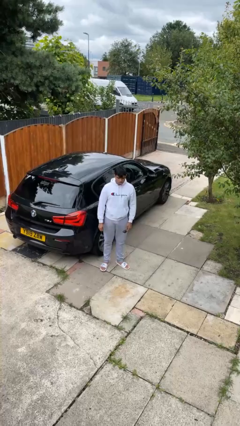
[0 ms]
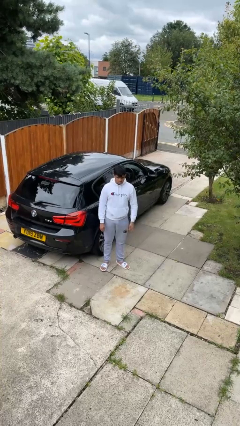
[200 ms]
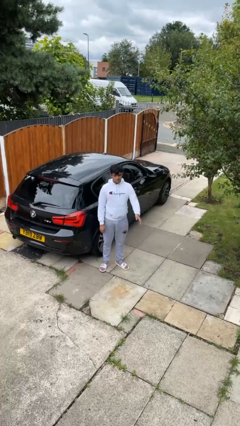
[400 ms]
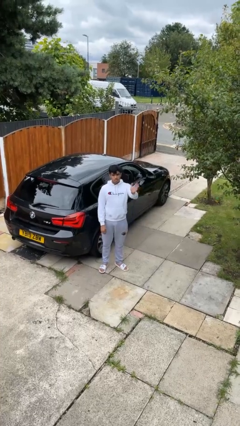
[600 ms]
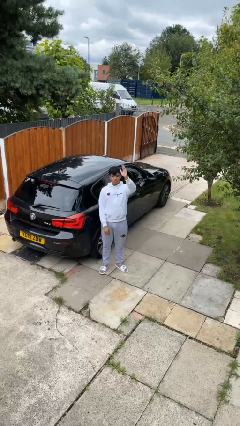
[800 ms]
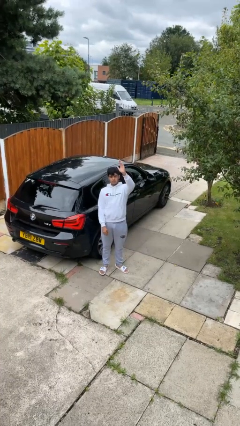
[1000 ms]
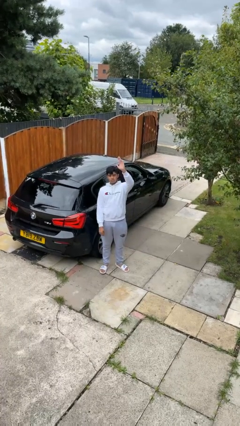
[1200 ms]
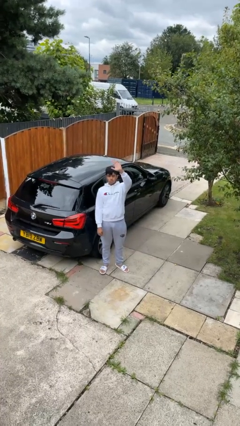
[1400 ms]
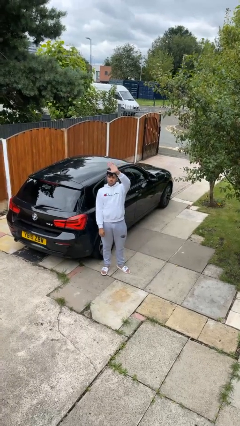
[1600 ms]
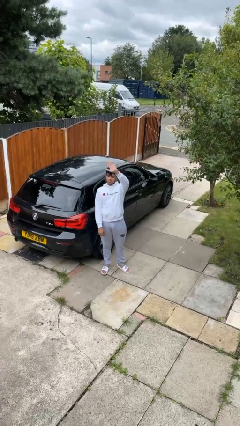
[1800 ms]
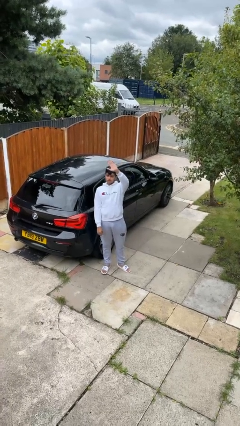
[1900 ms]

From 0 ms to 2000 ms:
person gestures raise hand

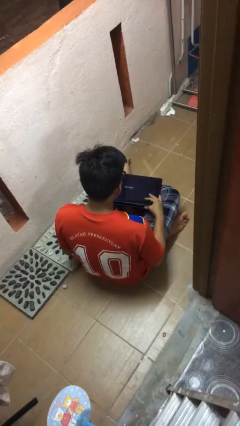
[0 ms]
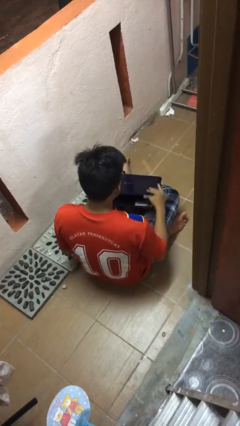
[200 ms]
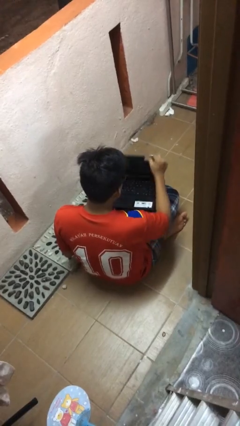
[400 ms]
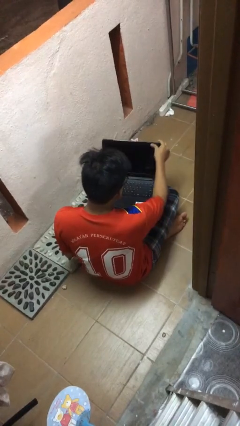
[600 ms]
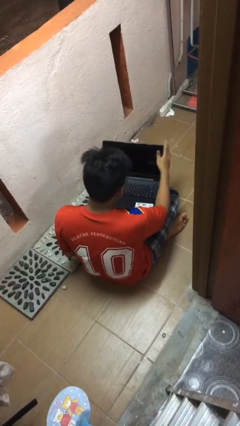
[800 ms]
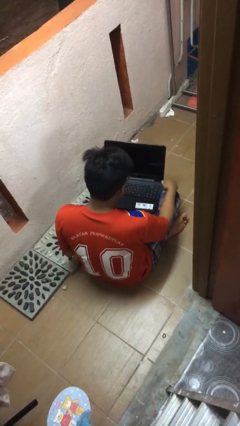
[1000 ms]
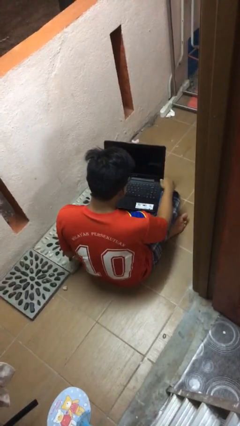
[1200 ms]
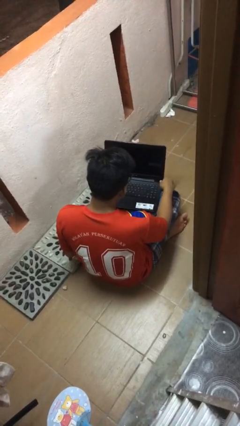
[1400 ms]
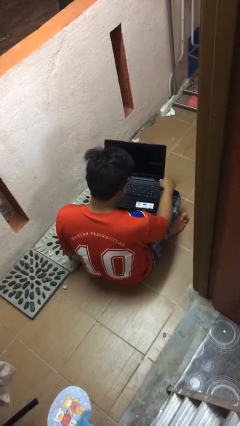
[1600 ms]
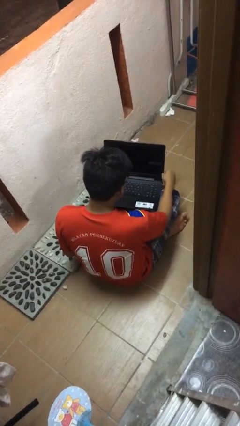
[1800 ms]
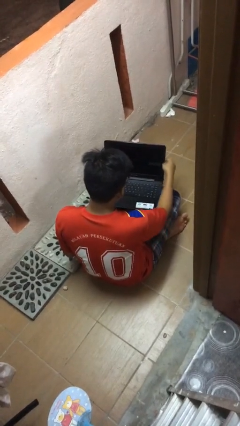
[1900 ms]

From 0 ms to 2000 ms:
person opens laptop

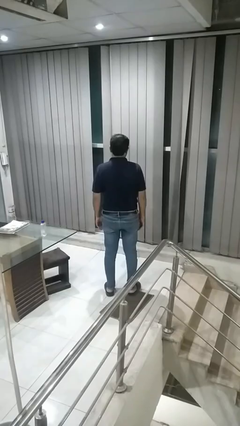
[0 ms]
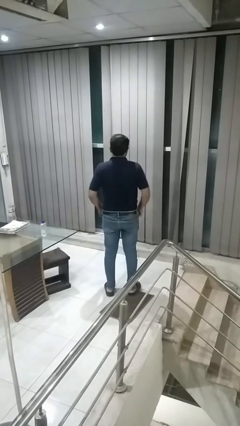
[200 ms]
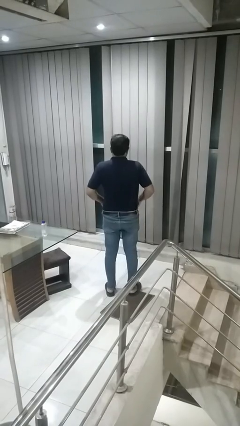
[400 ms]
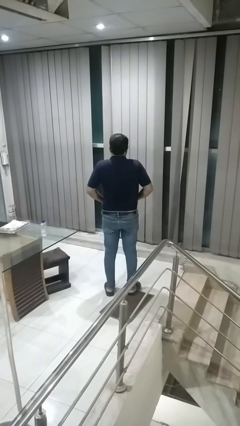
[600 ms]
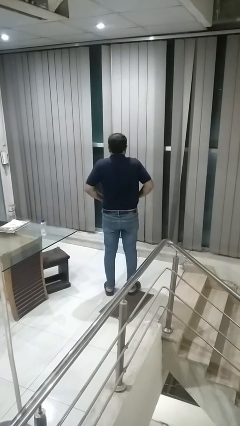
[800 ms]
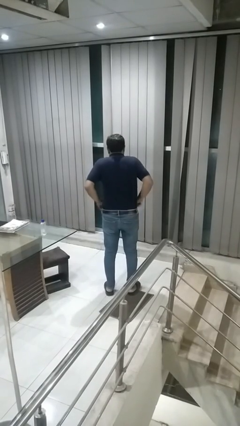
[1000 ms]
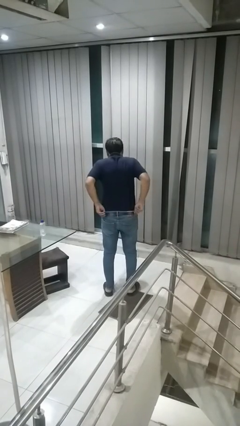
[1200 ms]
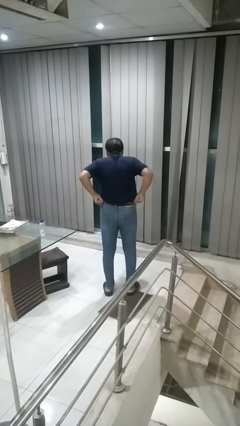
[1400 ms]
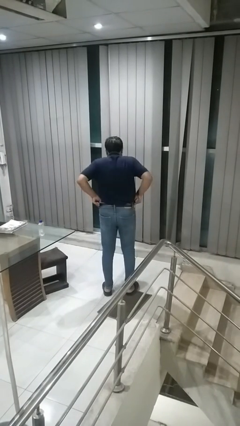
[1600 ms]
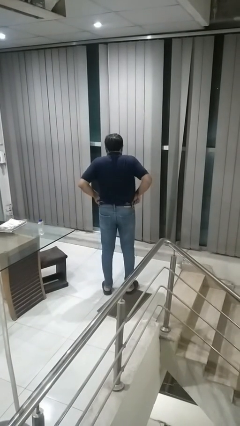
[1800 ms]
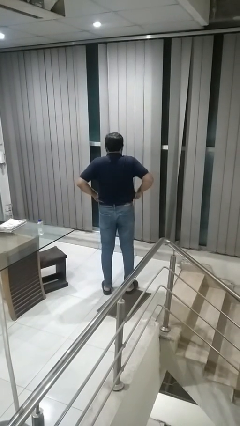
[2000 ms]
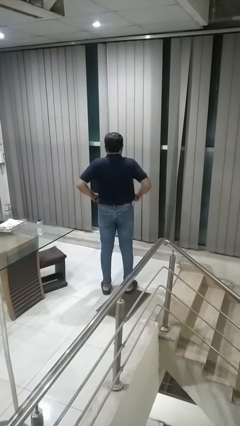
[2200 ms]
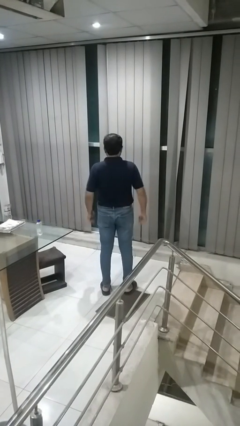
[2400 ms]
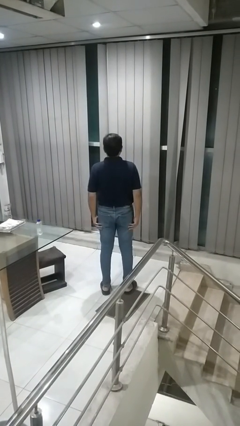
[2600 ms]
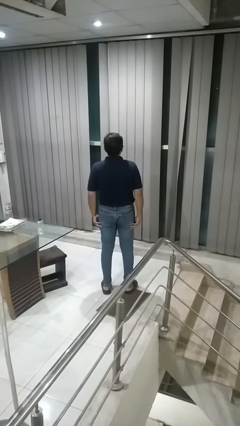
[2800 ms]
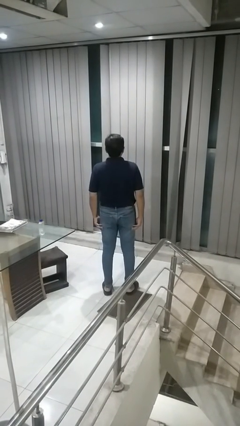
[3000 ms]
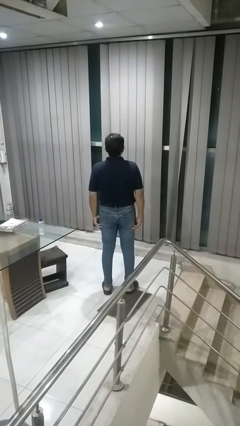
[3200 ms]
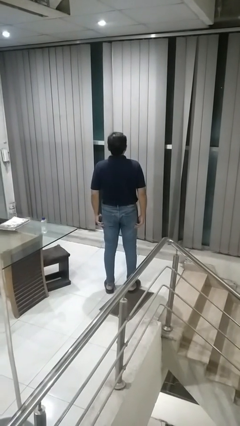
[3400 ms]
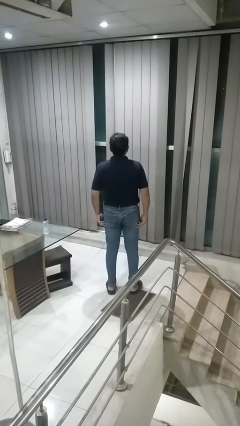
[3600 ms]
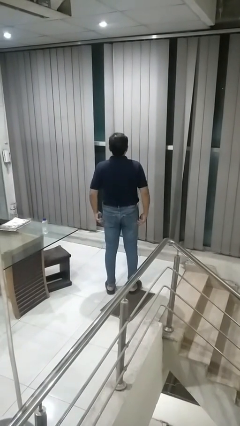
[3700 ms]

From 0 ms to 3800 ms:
person hikes up pants

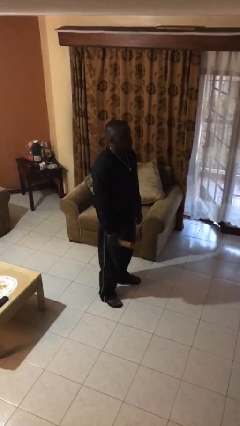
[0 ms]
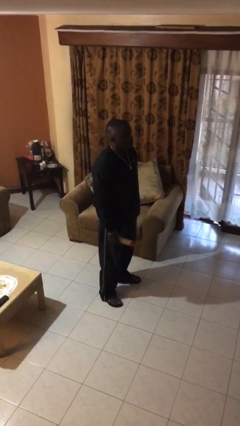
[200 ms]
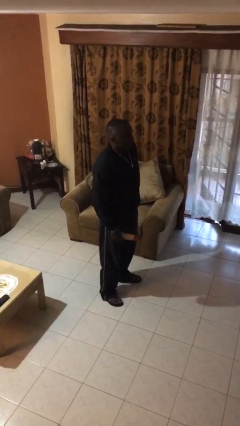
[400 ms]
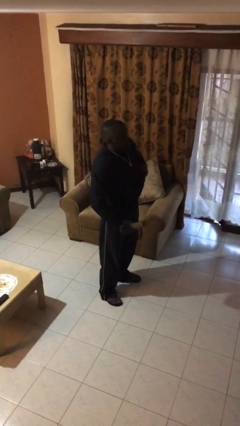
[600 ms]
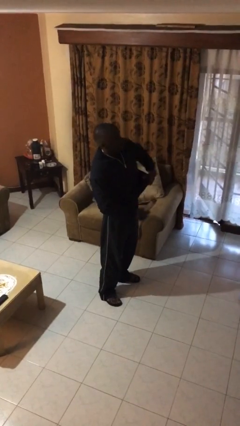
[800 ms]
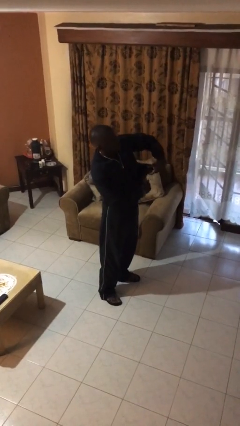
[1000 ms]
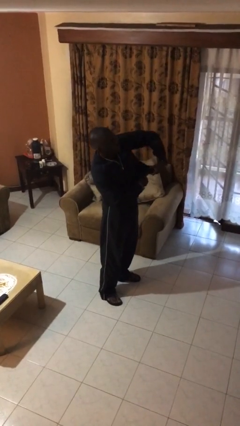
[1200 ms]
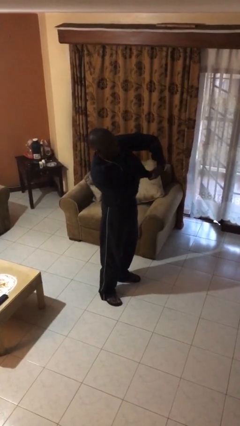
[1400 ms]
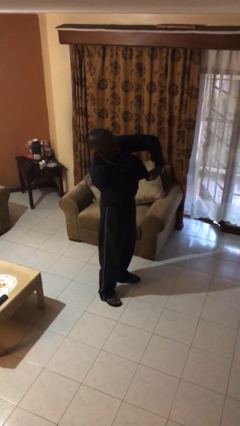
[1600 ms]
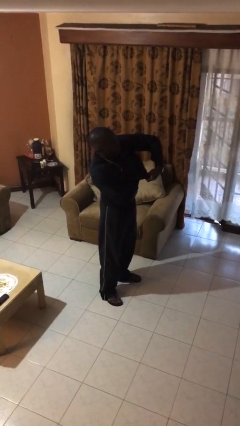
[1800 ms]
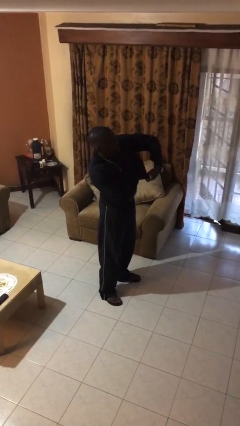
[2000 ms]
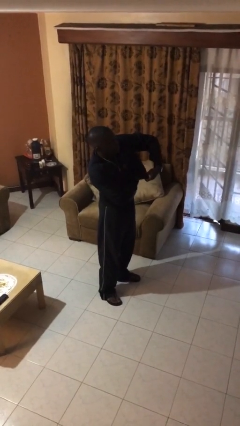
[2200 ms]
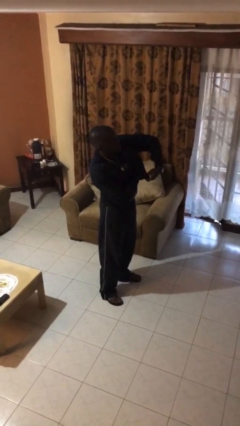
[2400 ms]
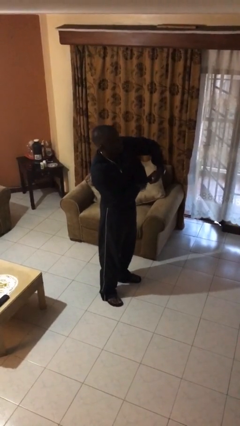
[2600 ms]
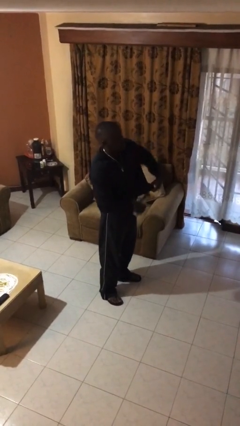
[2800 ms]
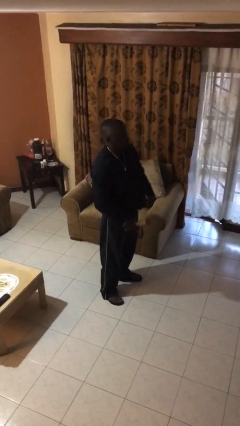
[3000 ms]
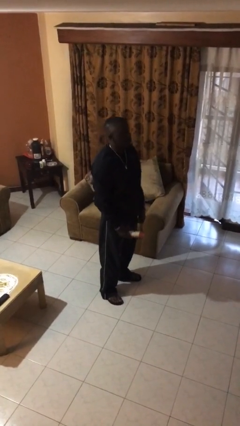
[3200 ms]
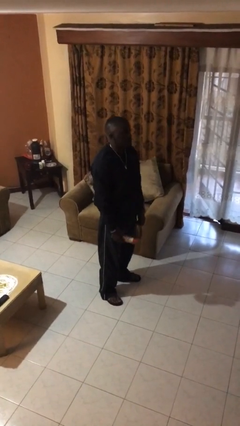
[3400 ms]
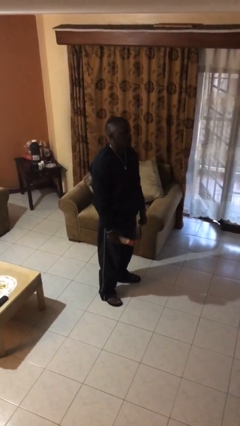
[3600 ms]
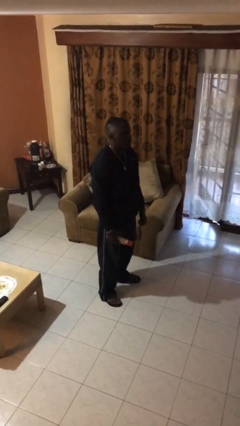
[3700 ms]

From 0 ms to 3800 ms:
person applies deodorant

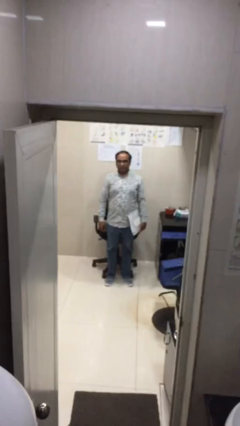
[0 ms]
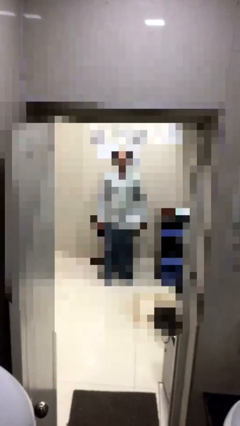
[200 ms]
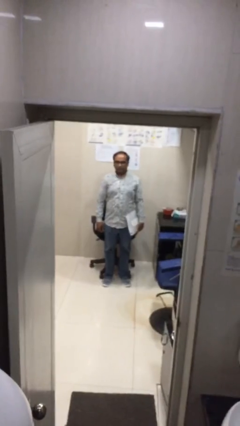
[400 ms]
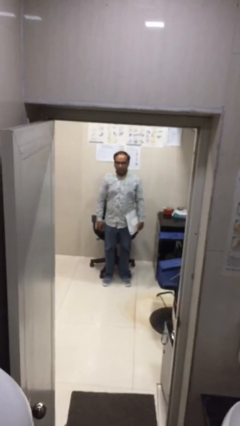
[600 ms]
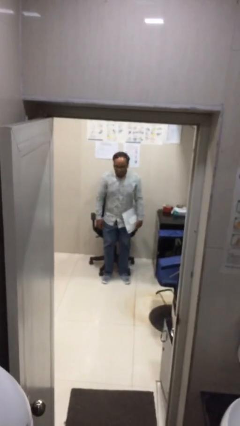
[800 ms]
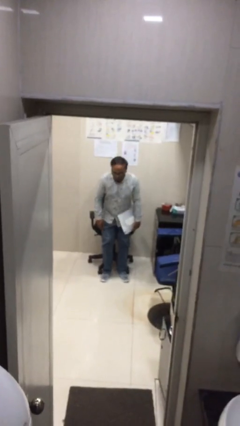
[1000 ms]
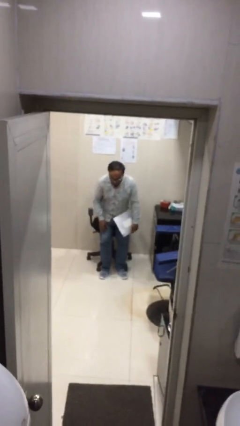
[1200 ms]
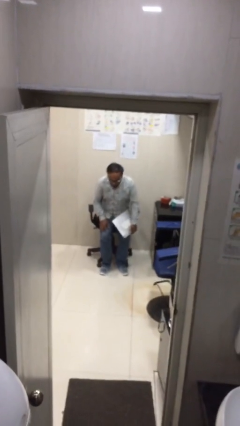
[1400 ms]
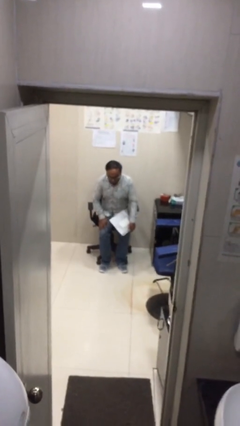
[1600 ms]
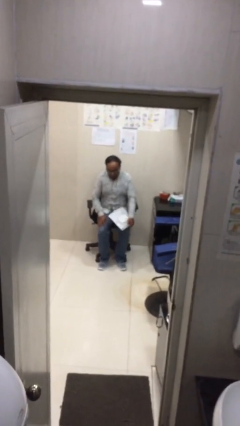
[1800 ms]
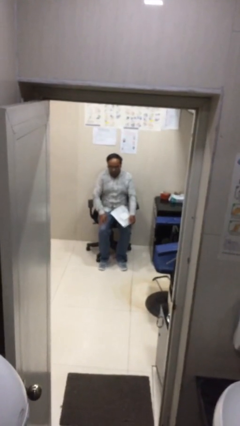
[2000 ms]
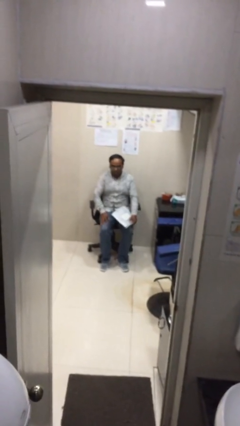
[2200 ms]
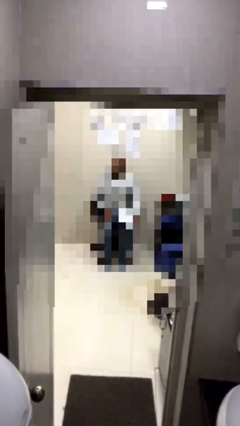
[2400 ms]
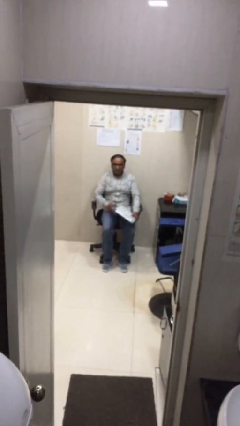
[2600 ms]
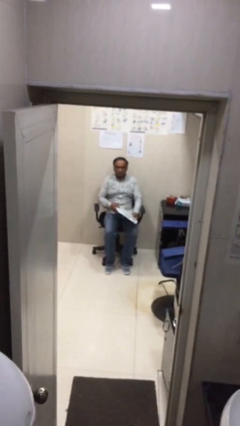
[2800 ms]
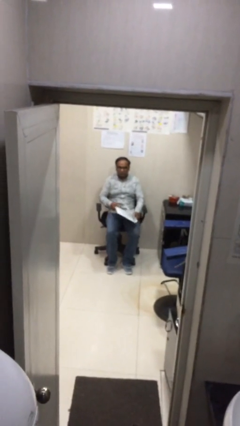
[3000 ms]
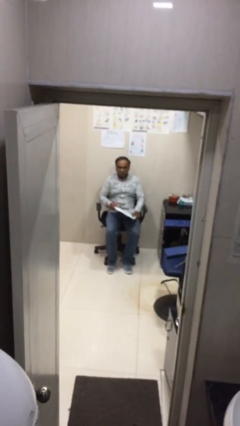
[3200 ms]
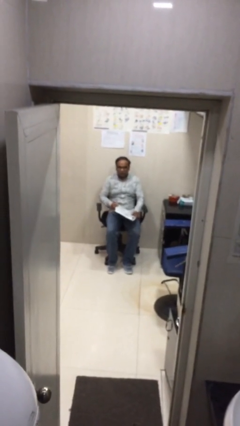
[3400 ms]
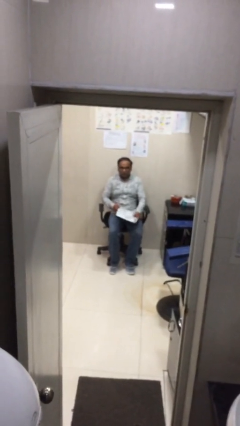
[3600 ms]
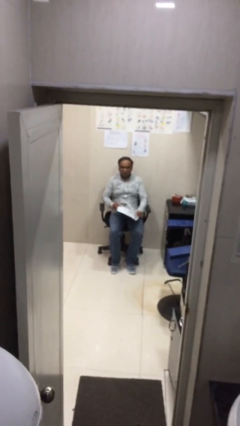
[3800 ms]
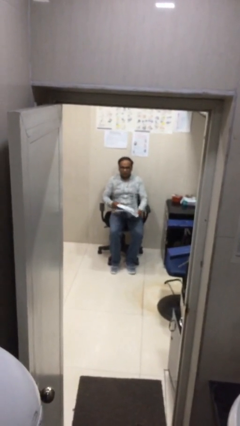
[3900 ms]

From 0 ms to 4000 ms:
person sits down

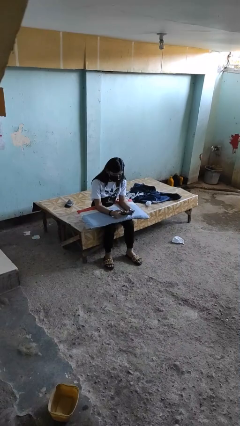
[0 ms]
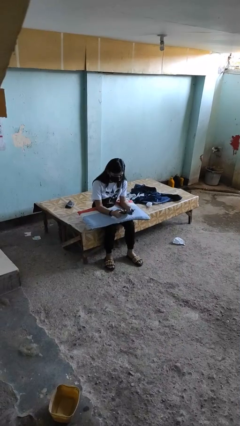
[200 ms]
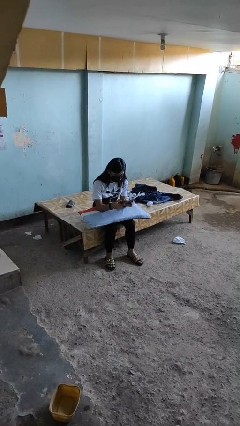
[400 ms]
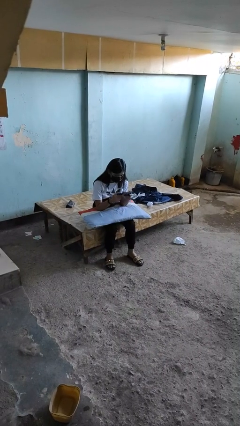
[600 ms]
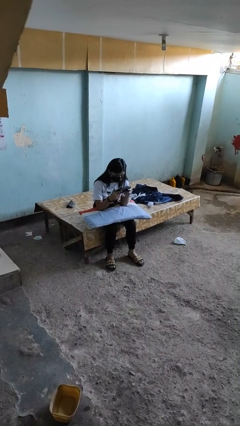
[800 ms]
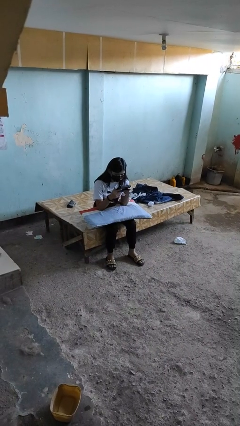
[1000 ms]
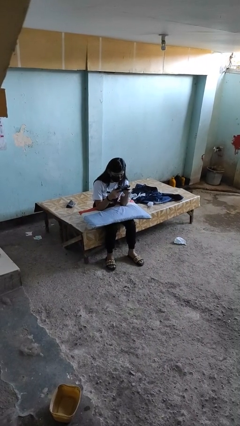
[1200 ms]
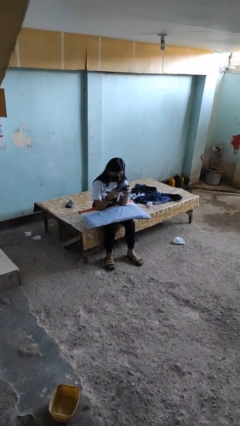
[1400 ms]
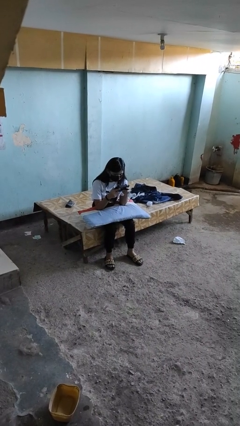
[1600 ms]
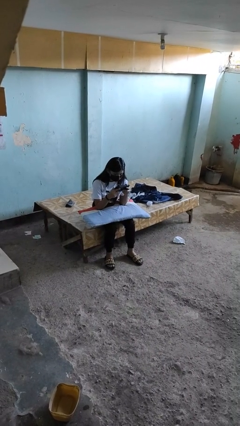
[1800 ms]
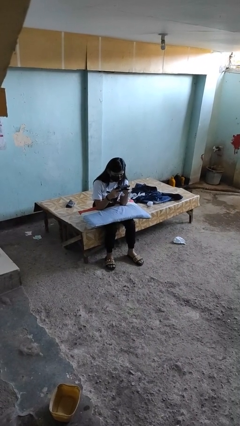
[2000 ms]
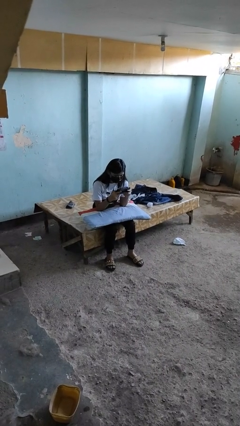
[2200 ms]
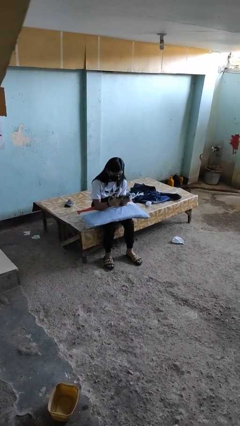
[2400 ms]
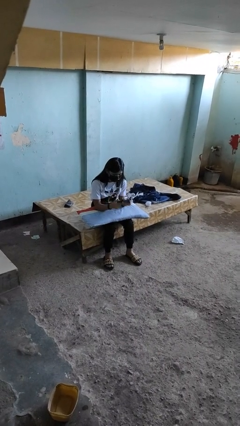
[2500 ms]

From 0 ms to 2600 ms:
person interacts with handheld game
